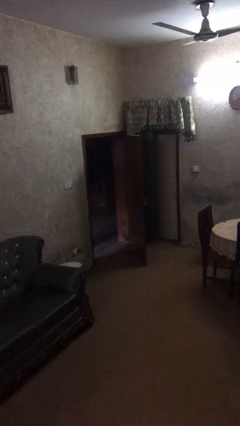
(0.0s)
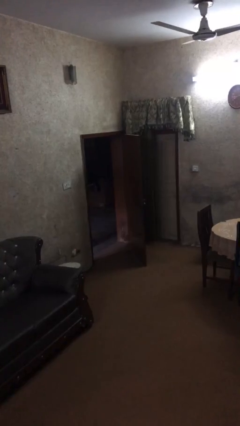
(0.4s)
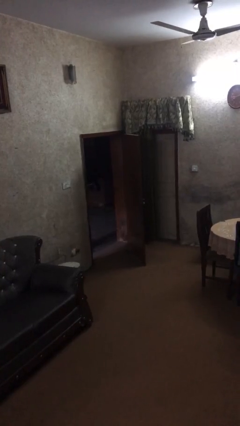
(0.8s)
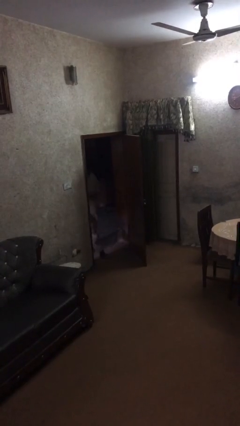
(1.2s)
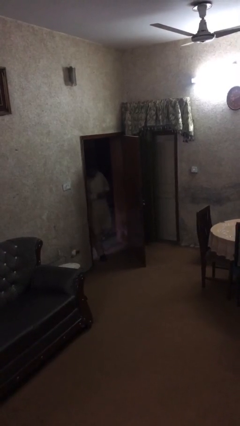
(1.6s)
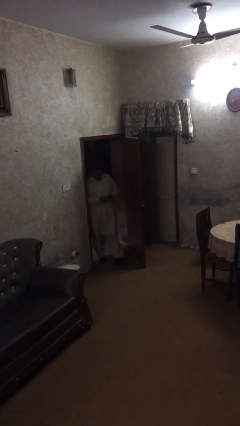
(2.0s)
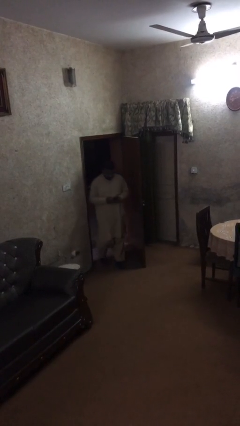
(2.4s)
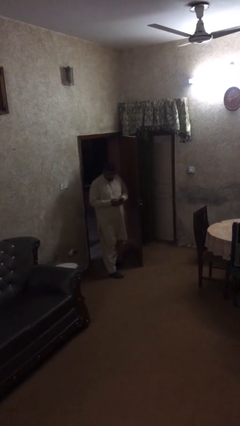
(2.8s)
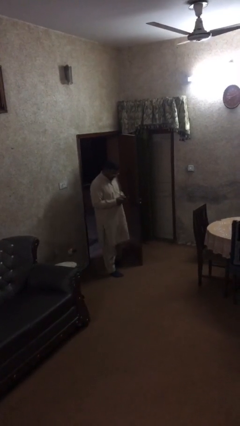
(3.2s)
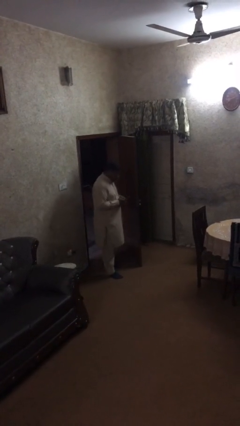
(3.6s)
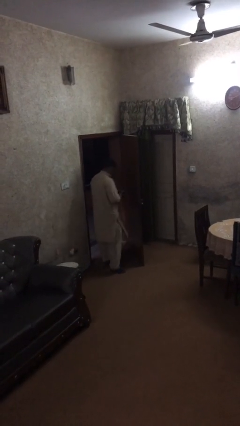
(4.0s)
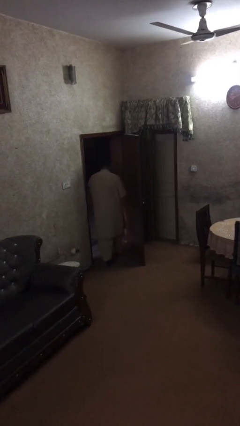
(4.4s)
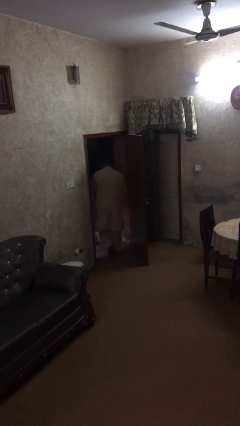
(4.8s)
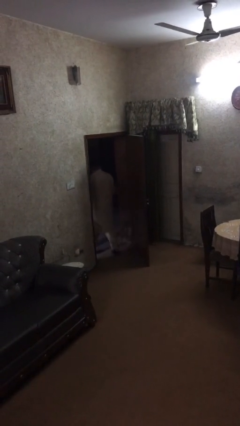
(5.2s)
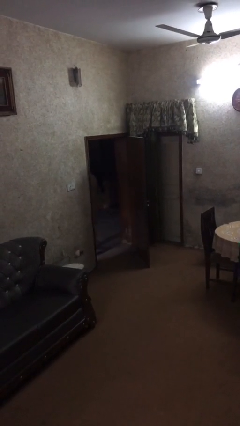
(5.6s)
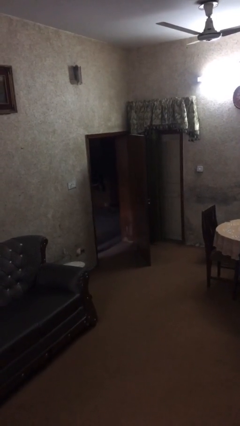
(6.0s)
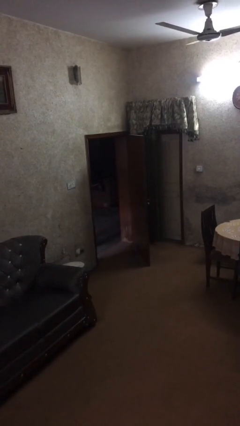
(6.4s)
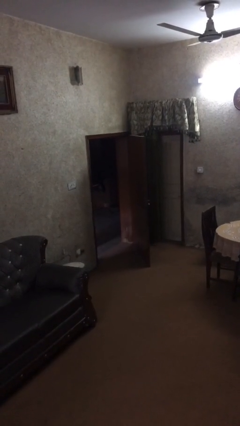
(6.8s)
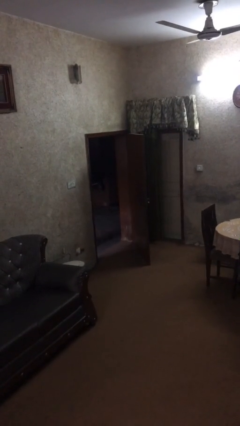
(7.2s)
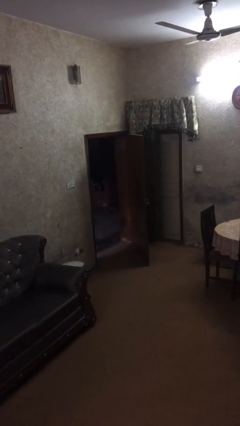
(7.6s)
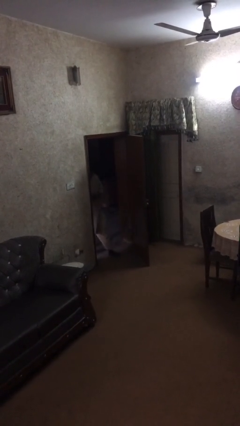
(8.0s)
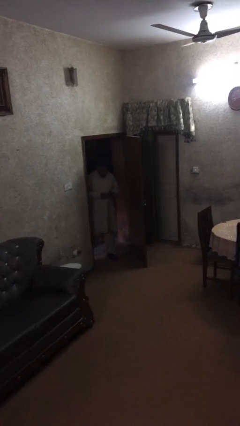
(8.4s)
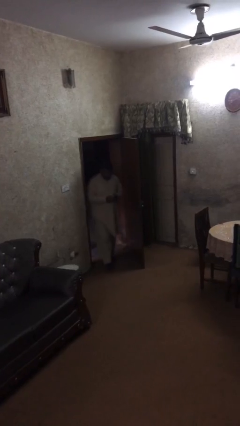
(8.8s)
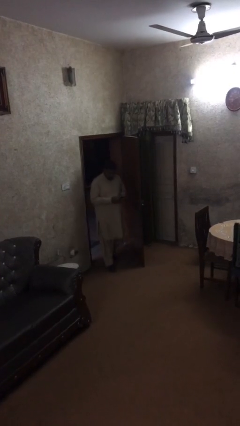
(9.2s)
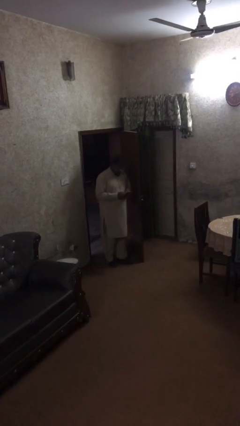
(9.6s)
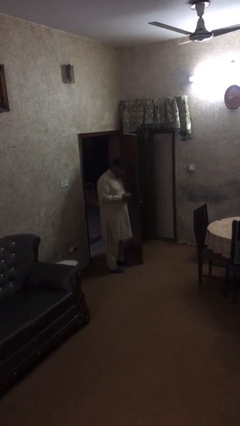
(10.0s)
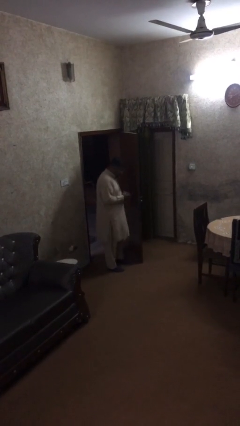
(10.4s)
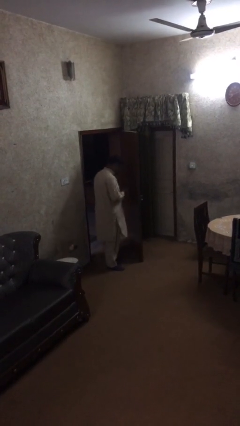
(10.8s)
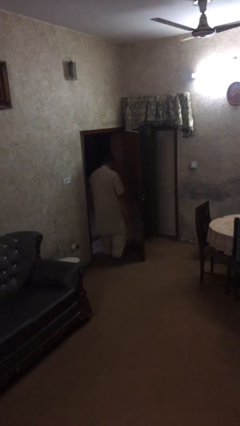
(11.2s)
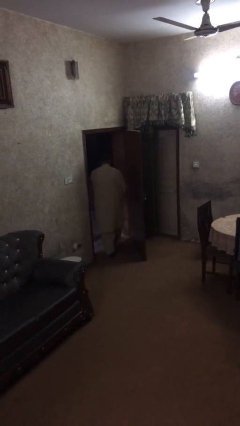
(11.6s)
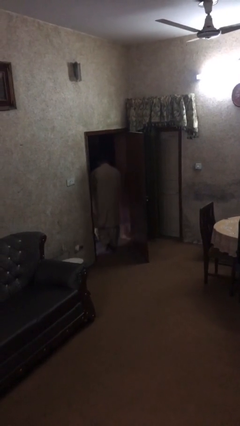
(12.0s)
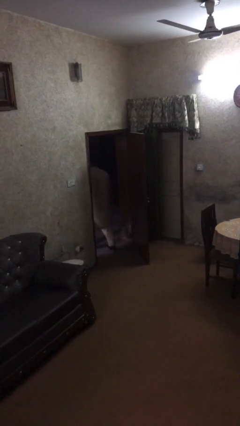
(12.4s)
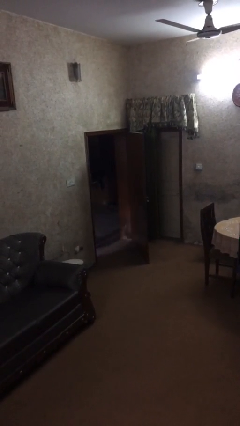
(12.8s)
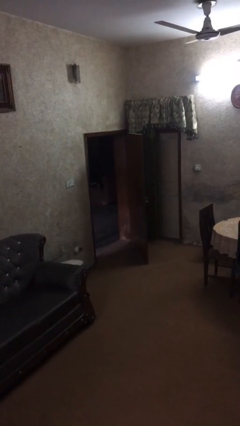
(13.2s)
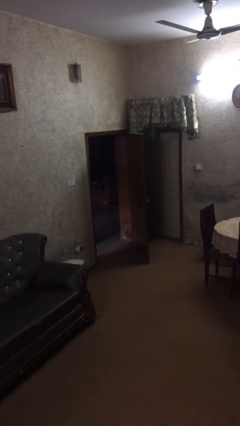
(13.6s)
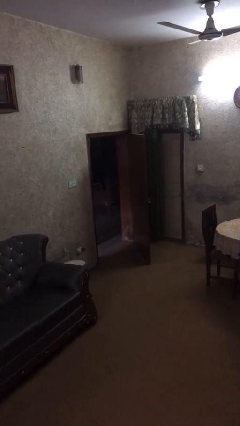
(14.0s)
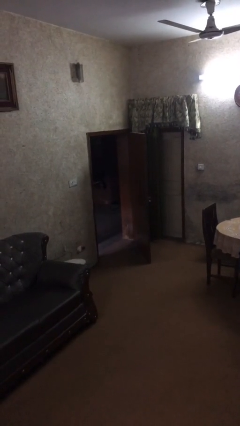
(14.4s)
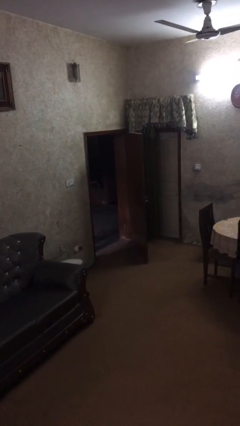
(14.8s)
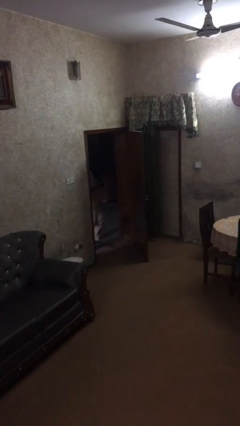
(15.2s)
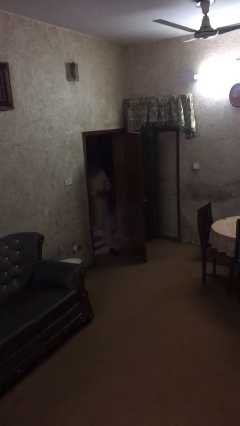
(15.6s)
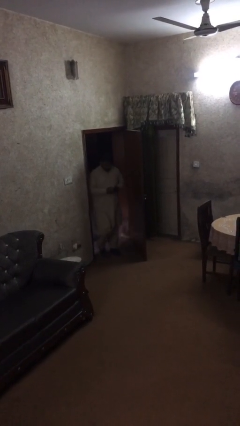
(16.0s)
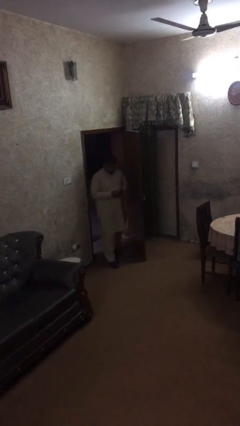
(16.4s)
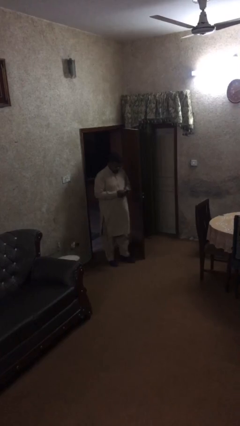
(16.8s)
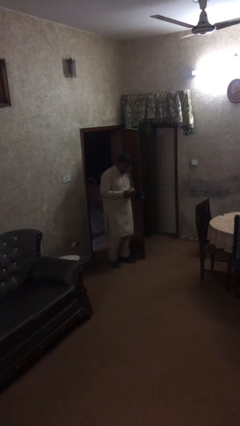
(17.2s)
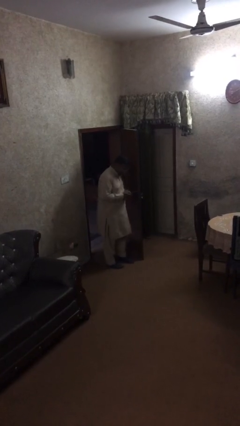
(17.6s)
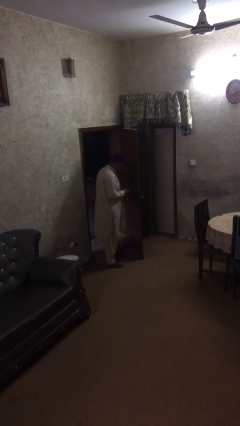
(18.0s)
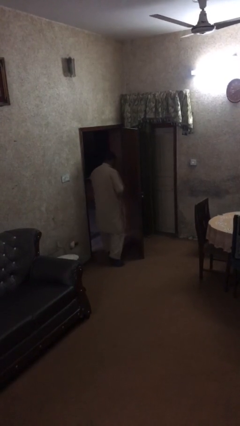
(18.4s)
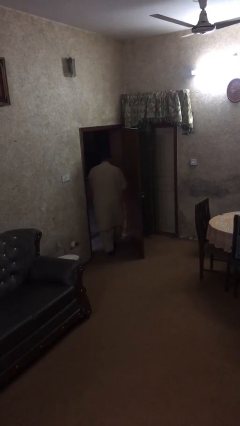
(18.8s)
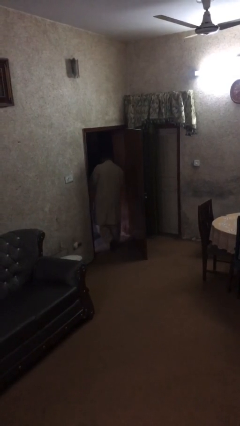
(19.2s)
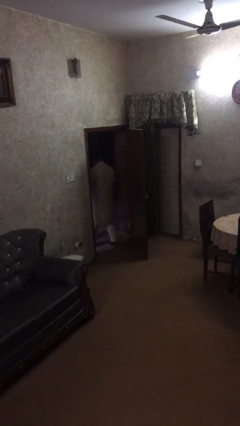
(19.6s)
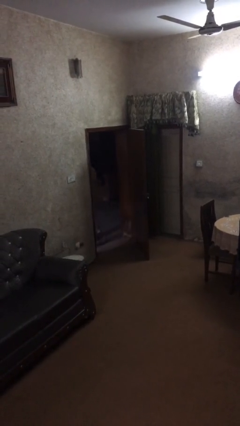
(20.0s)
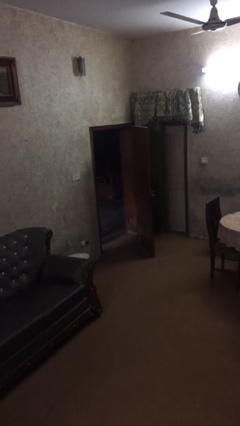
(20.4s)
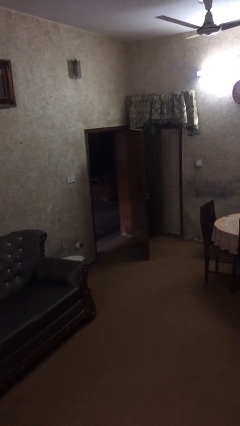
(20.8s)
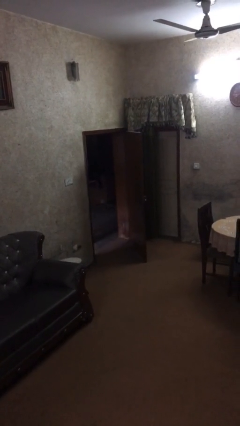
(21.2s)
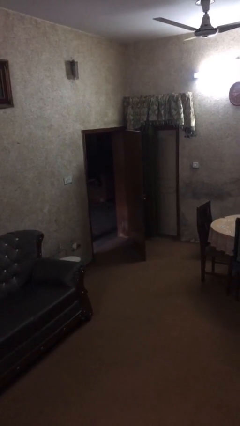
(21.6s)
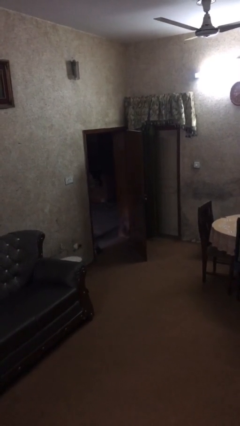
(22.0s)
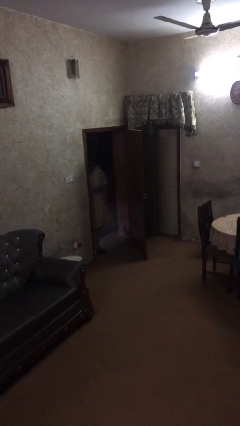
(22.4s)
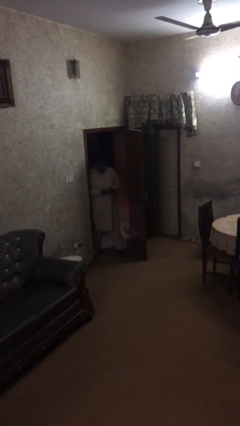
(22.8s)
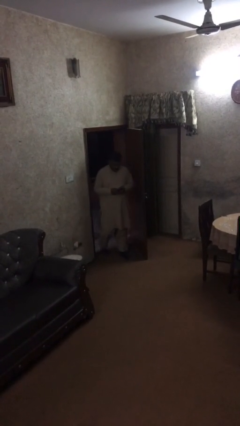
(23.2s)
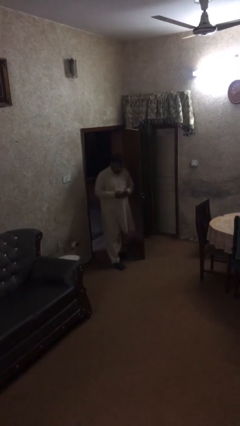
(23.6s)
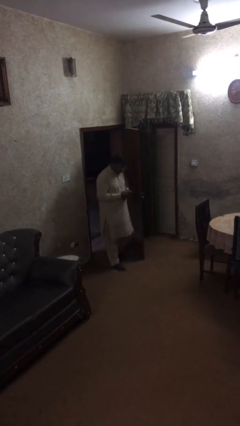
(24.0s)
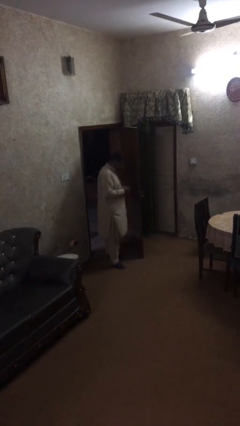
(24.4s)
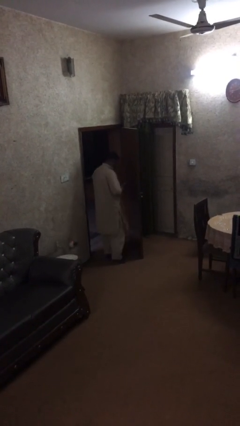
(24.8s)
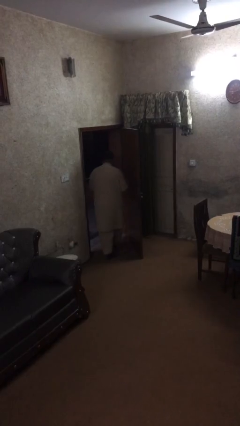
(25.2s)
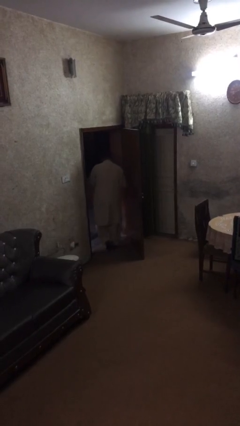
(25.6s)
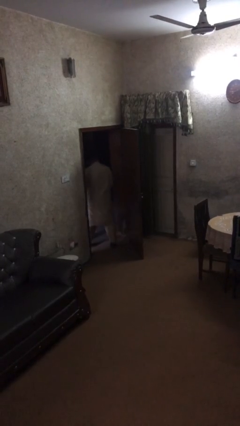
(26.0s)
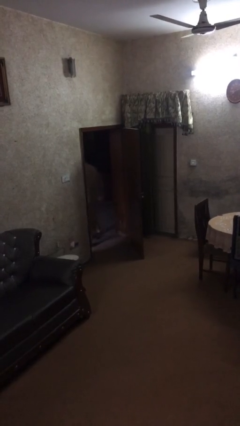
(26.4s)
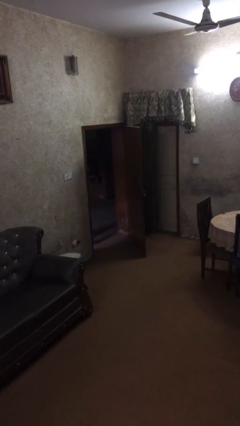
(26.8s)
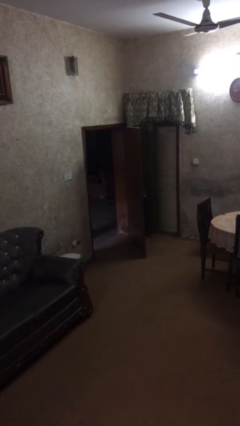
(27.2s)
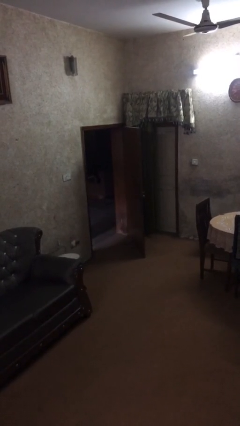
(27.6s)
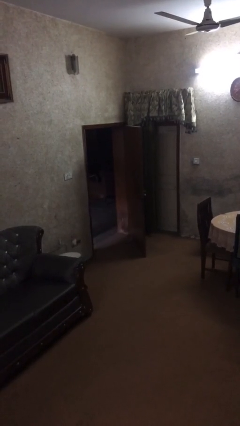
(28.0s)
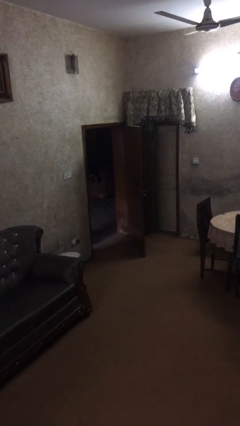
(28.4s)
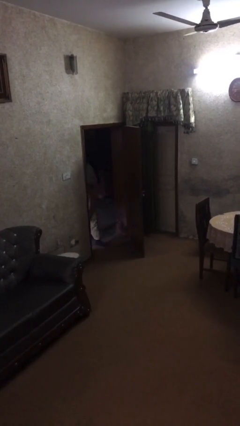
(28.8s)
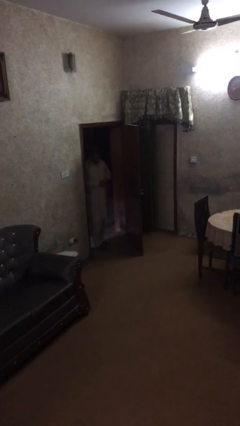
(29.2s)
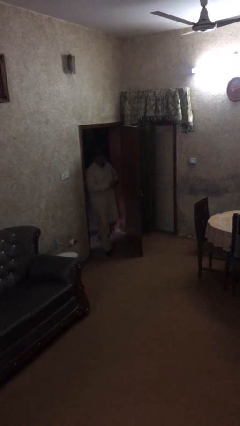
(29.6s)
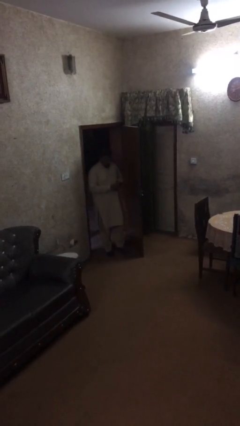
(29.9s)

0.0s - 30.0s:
person texts on phone

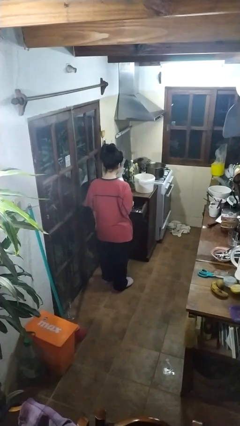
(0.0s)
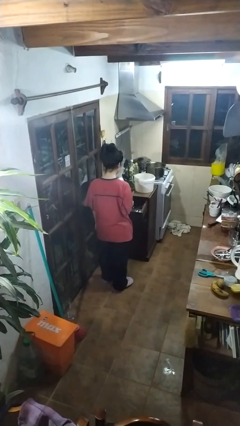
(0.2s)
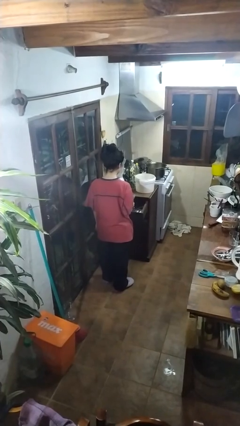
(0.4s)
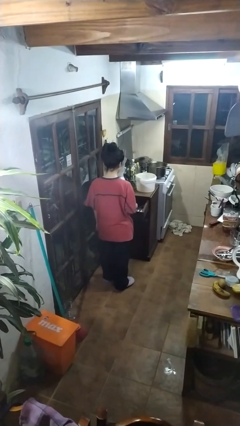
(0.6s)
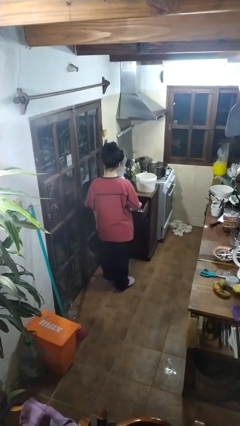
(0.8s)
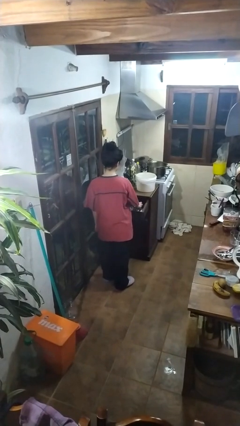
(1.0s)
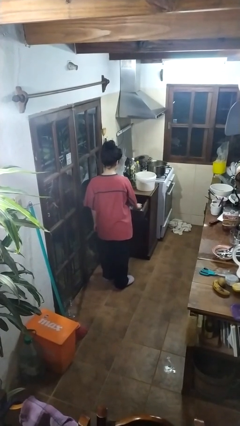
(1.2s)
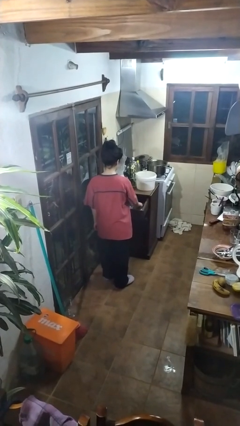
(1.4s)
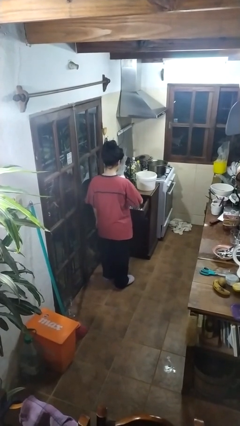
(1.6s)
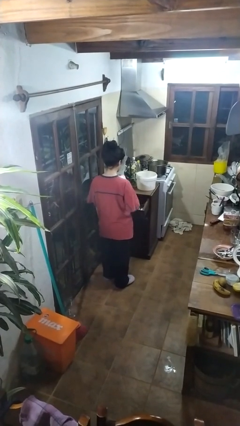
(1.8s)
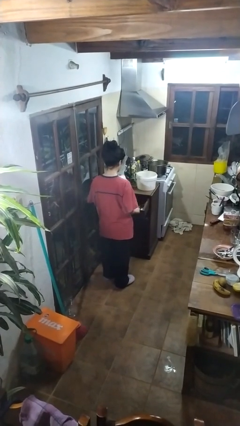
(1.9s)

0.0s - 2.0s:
person puts object into kitchen drawer

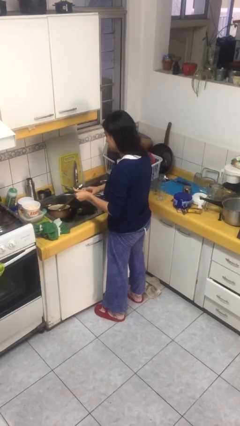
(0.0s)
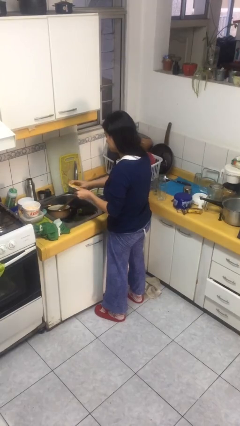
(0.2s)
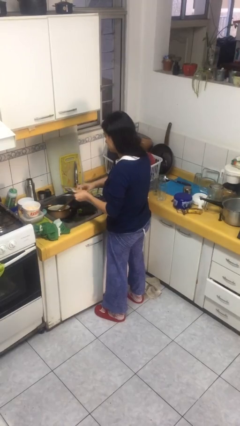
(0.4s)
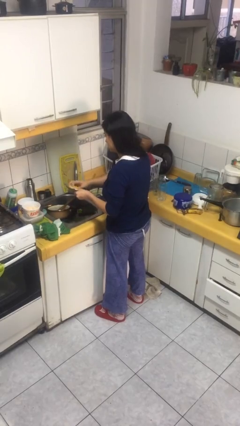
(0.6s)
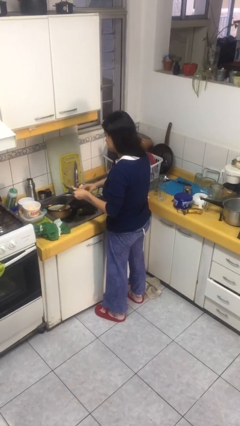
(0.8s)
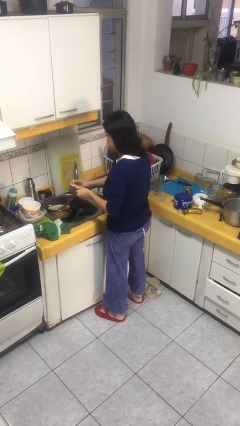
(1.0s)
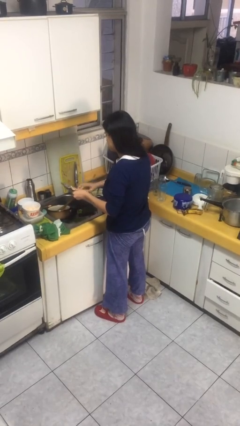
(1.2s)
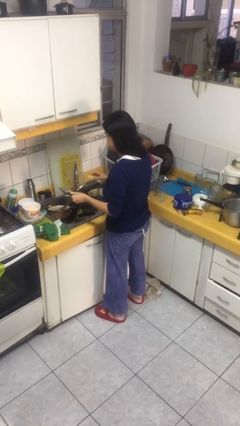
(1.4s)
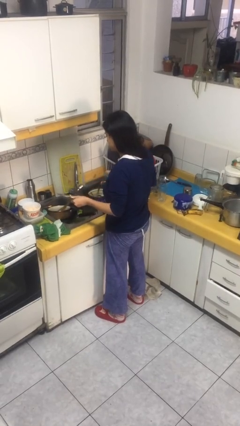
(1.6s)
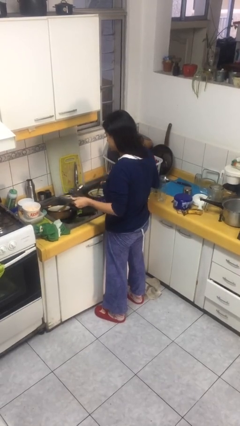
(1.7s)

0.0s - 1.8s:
person washes dish
